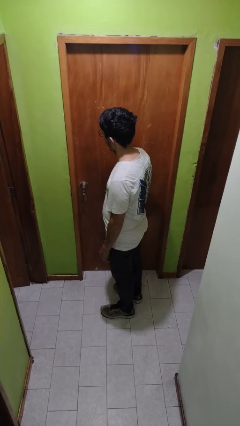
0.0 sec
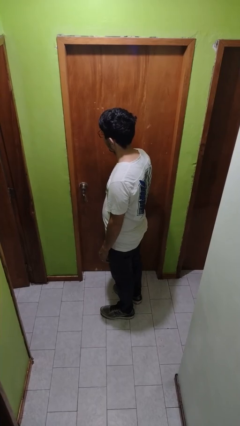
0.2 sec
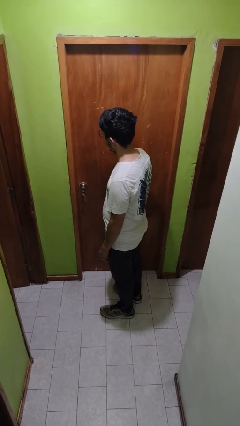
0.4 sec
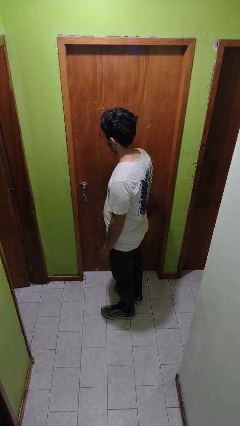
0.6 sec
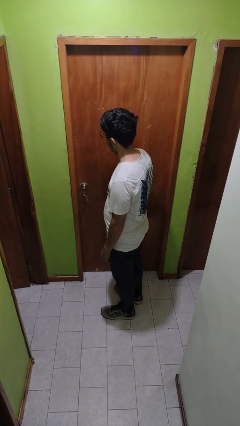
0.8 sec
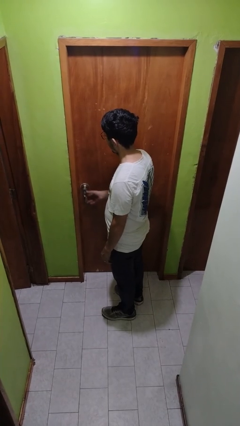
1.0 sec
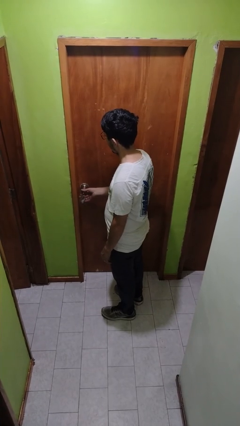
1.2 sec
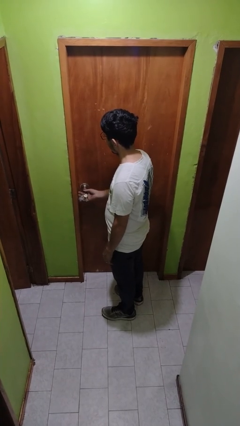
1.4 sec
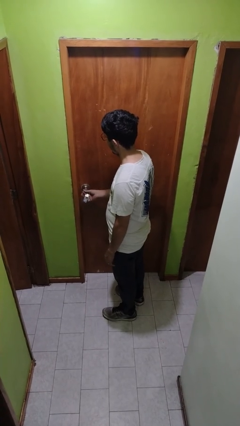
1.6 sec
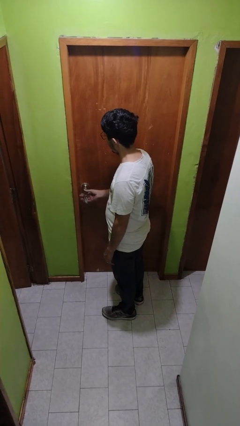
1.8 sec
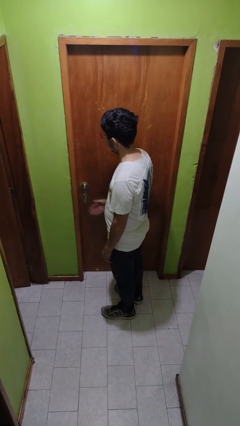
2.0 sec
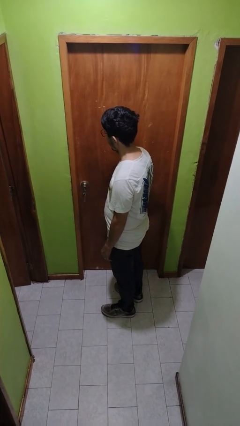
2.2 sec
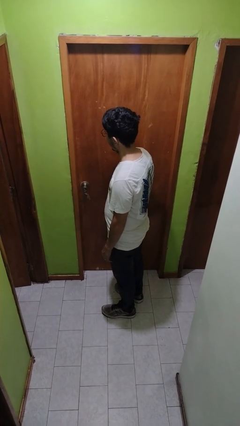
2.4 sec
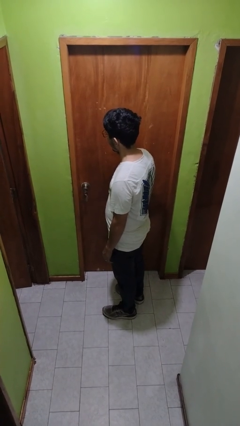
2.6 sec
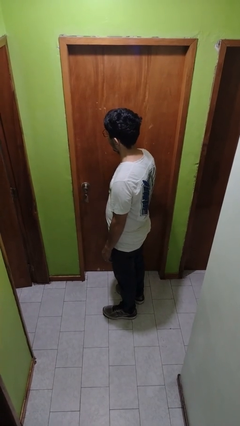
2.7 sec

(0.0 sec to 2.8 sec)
person locks door with keys

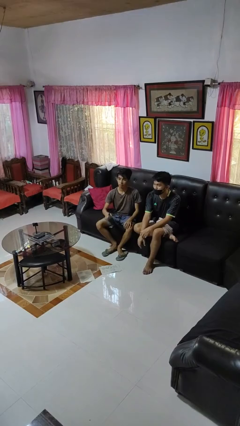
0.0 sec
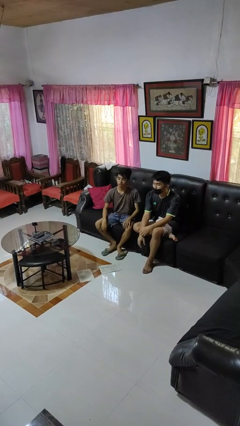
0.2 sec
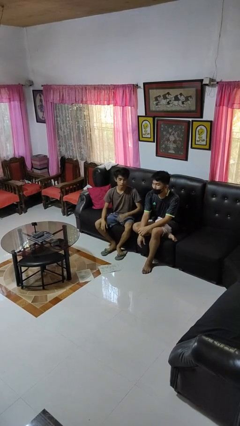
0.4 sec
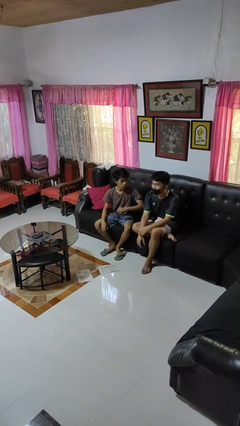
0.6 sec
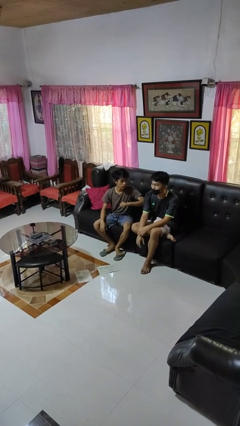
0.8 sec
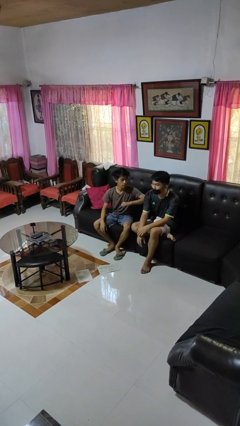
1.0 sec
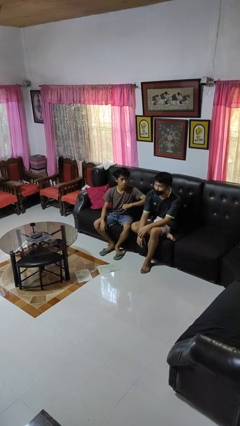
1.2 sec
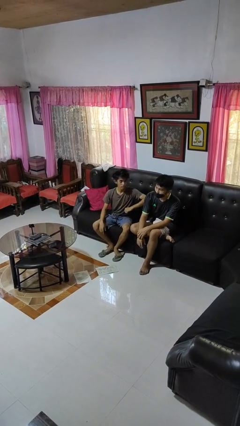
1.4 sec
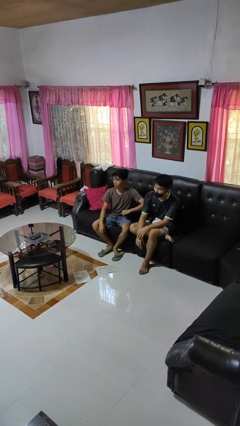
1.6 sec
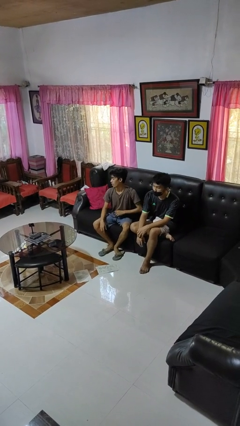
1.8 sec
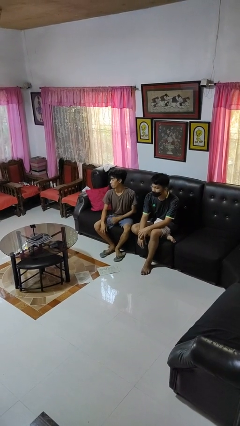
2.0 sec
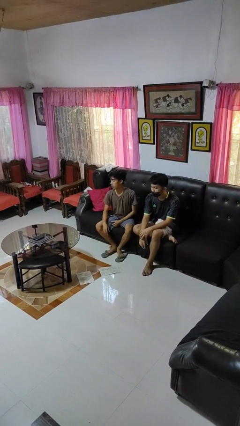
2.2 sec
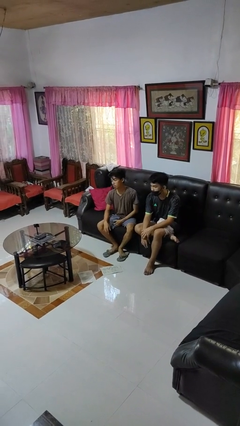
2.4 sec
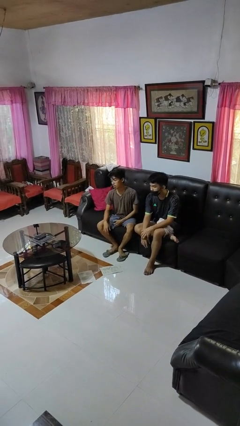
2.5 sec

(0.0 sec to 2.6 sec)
person nudges person with elbow

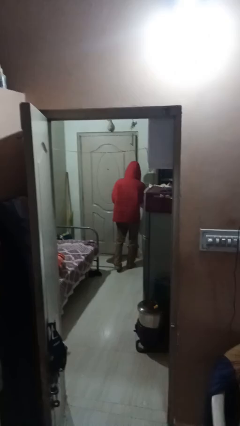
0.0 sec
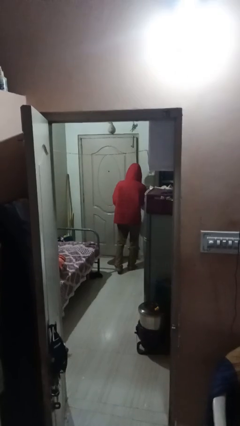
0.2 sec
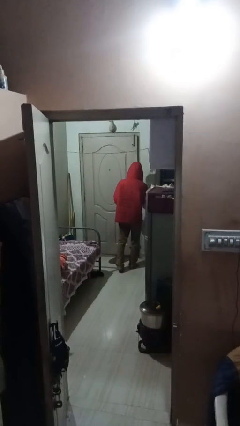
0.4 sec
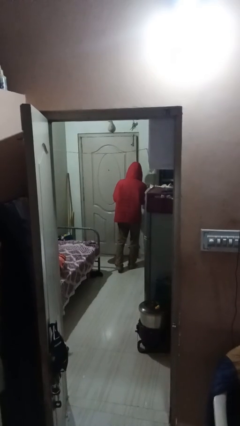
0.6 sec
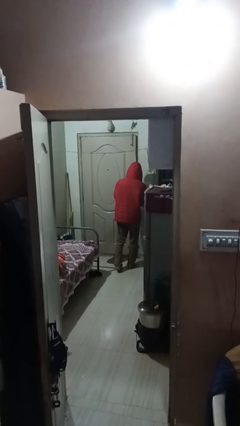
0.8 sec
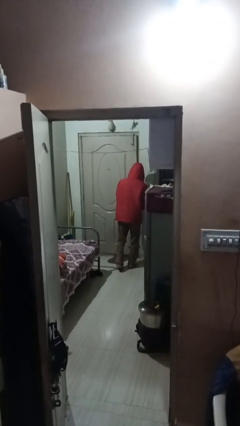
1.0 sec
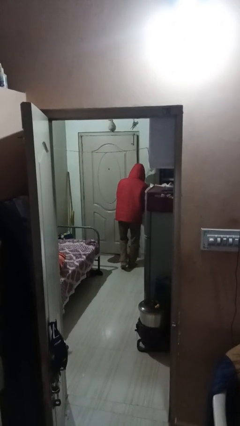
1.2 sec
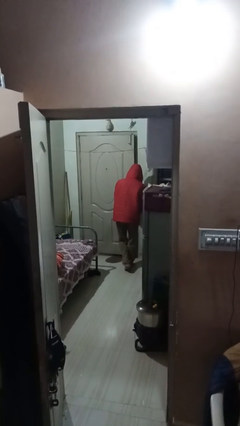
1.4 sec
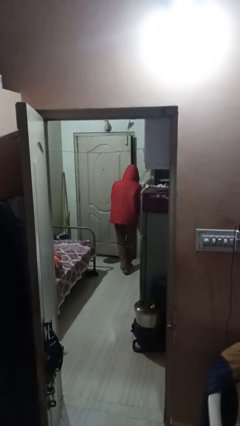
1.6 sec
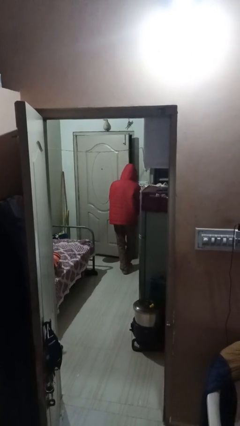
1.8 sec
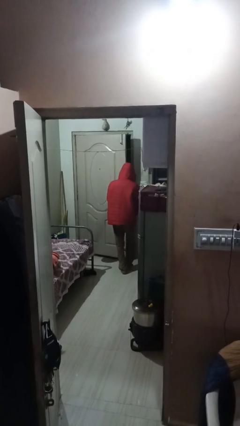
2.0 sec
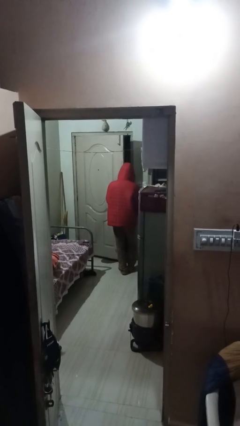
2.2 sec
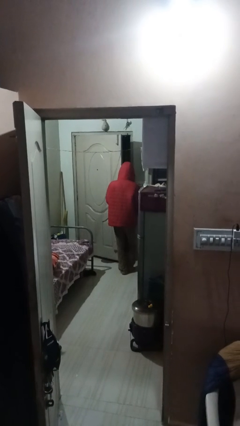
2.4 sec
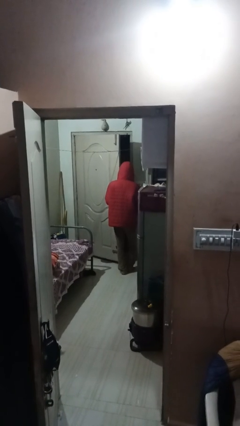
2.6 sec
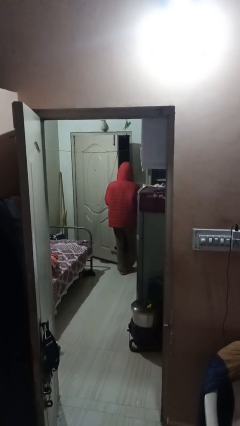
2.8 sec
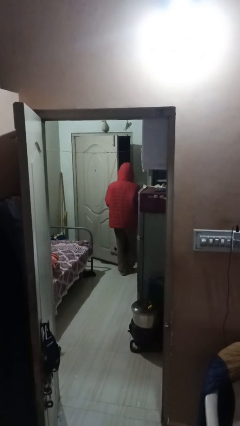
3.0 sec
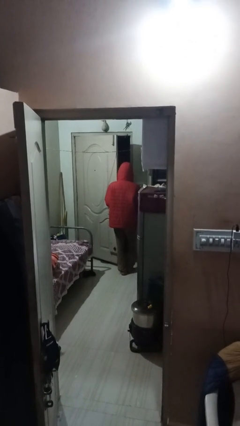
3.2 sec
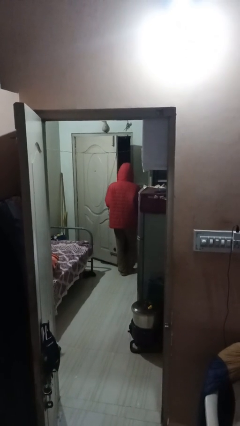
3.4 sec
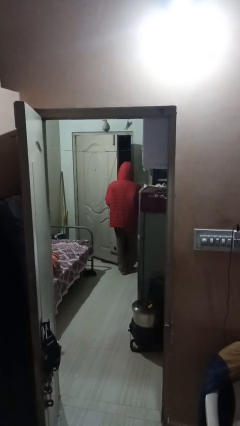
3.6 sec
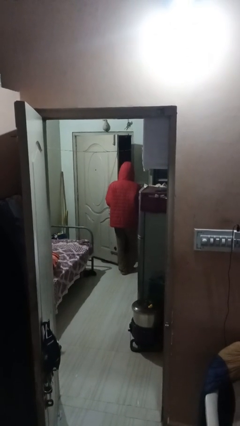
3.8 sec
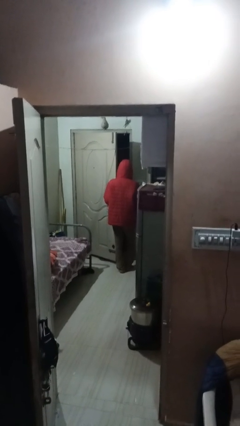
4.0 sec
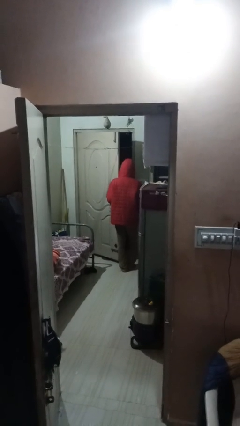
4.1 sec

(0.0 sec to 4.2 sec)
person opens facility door

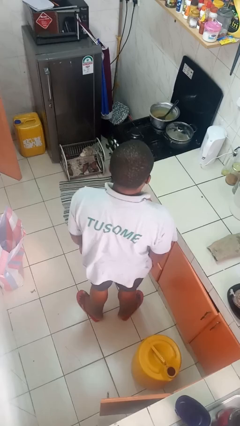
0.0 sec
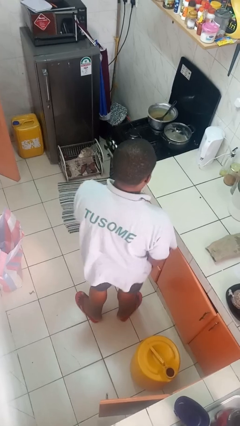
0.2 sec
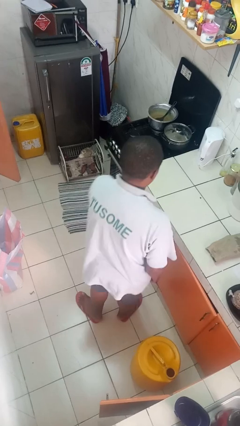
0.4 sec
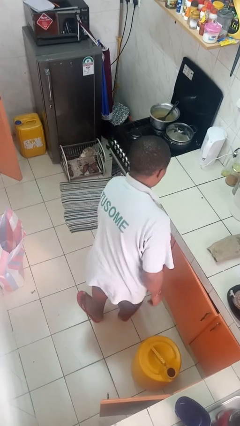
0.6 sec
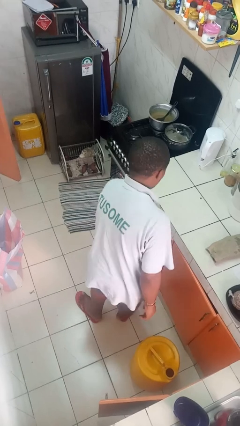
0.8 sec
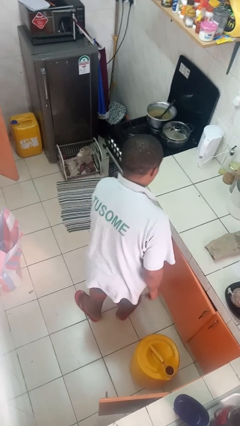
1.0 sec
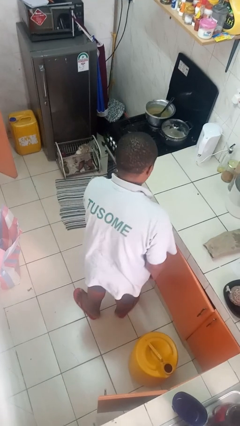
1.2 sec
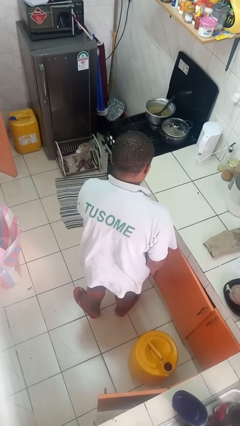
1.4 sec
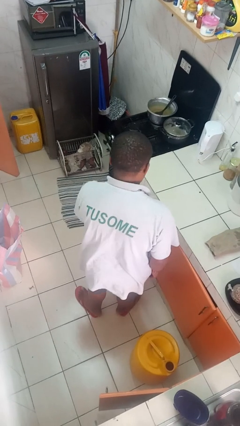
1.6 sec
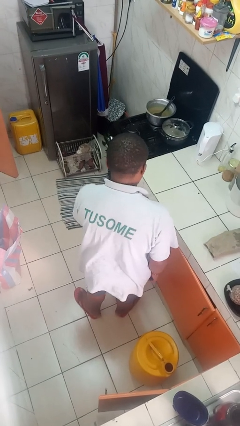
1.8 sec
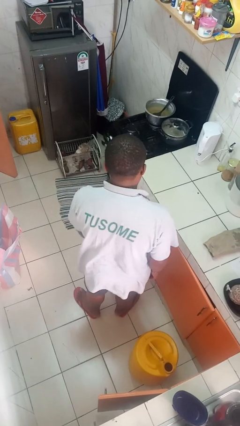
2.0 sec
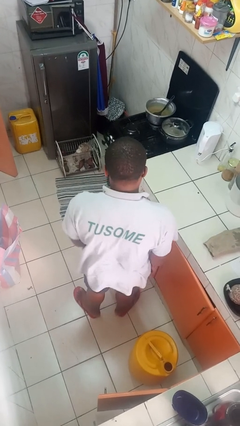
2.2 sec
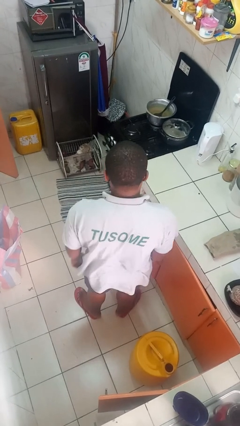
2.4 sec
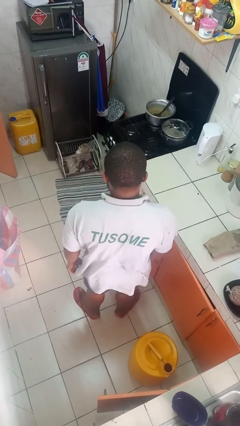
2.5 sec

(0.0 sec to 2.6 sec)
person opens kitchen drawer

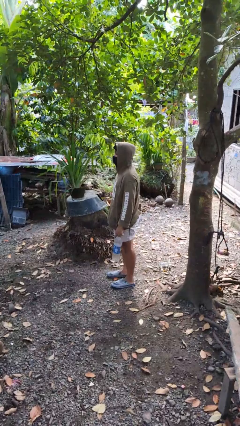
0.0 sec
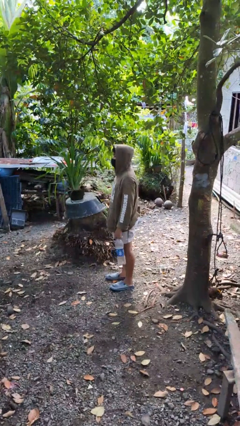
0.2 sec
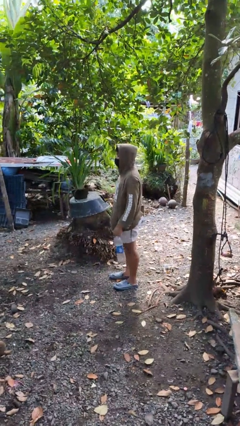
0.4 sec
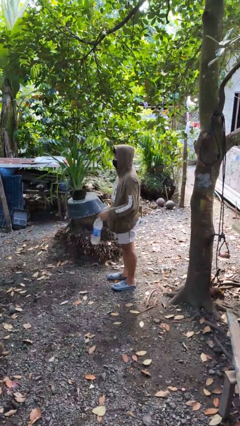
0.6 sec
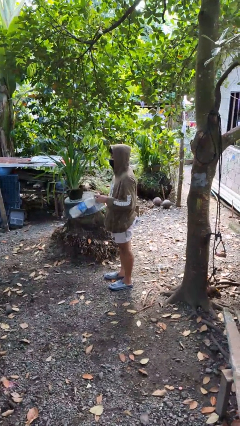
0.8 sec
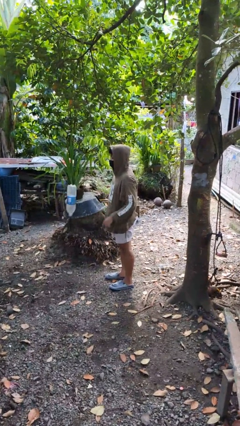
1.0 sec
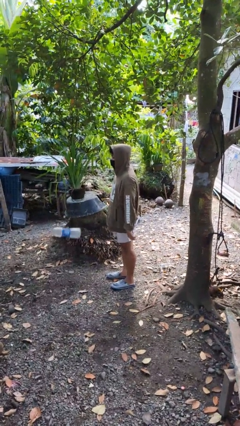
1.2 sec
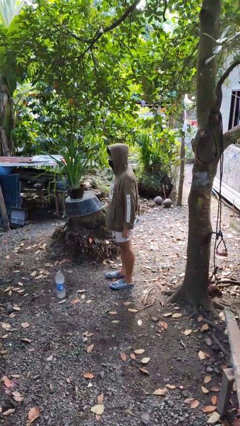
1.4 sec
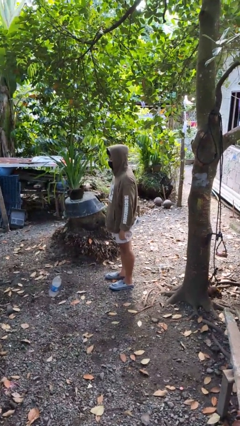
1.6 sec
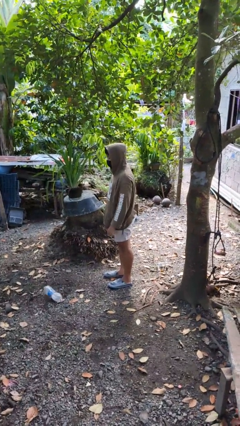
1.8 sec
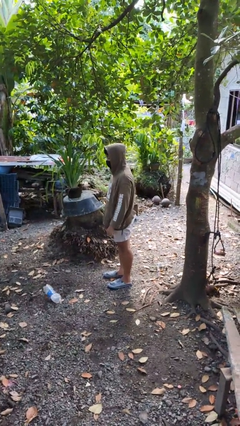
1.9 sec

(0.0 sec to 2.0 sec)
person throws object into air

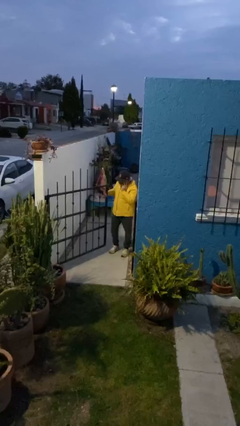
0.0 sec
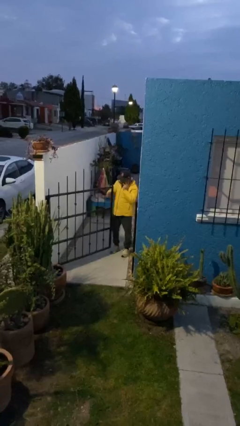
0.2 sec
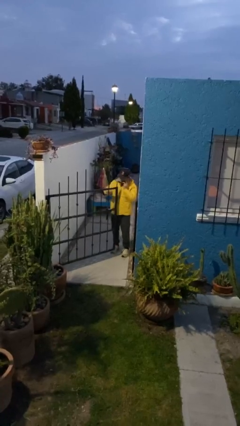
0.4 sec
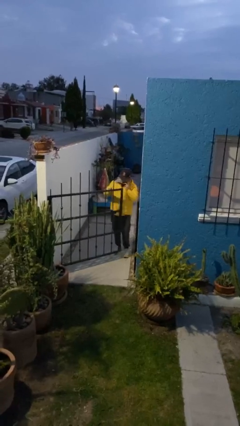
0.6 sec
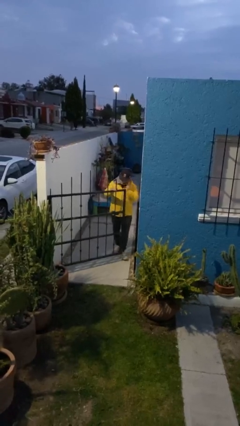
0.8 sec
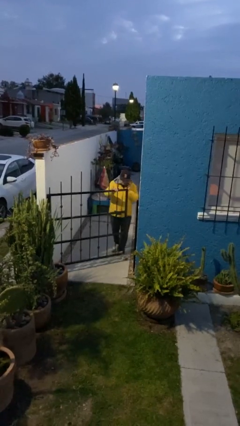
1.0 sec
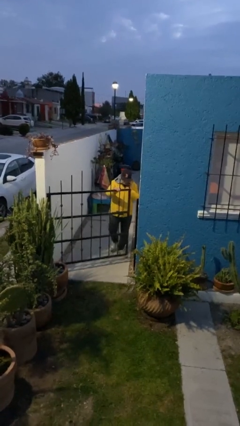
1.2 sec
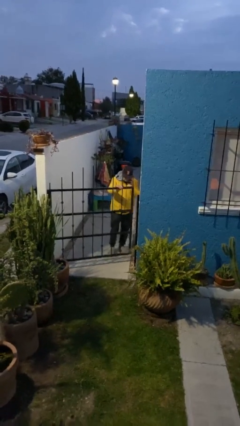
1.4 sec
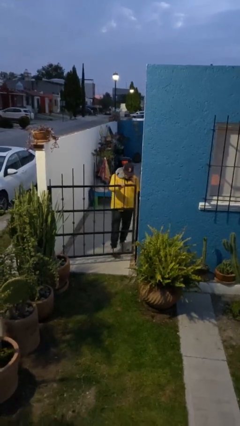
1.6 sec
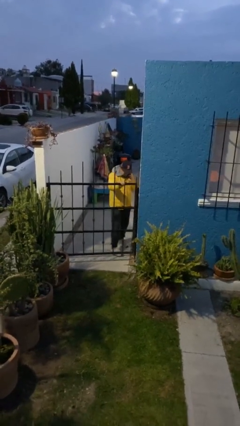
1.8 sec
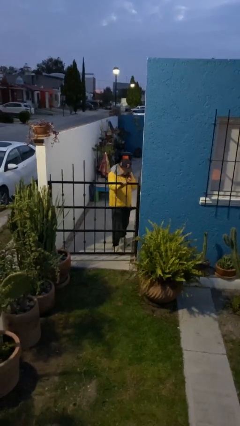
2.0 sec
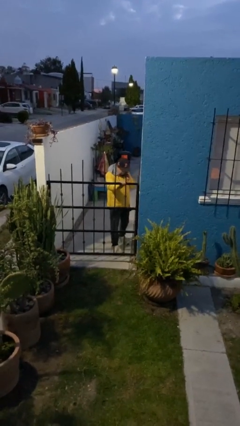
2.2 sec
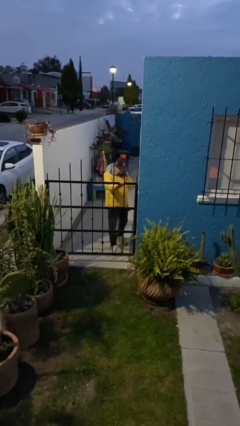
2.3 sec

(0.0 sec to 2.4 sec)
person closes facility door

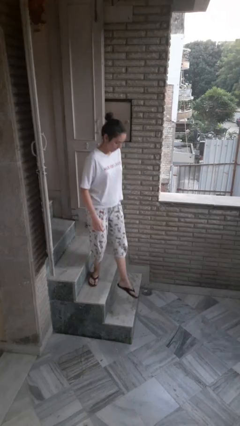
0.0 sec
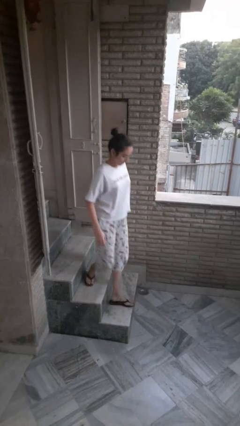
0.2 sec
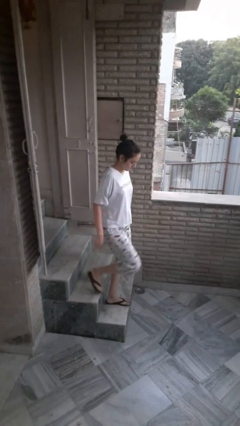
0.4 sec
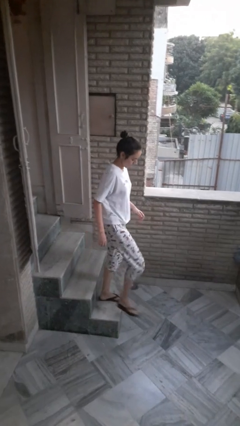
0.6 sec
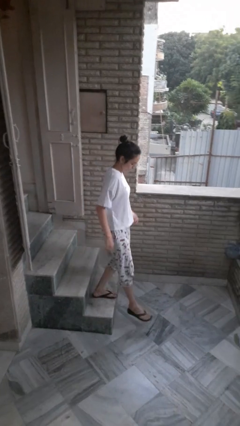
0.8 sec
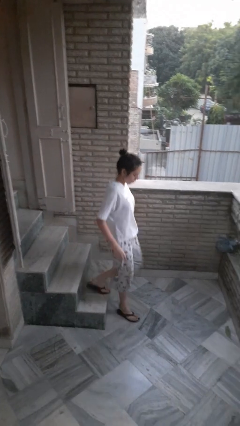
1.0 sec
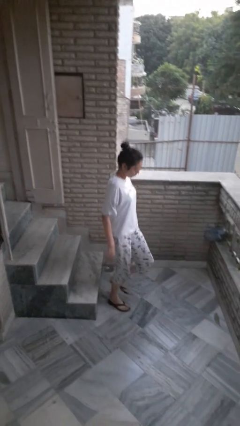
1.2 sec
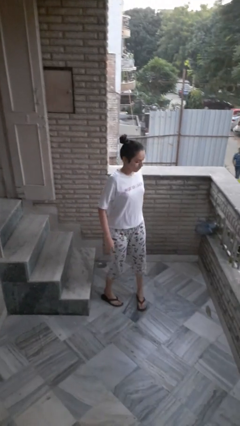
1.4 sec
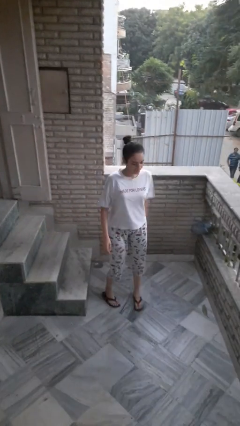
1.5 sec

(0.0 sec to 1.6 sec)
person climbs down stairs
